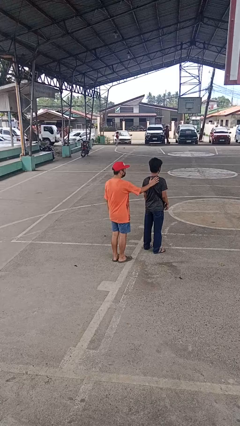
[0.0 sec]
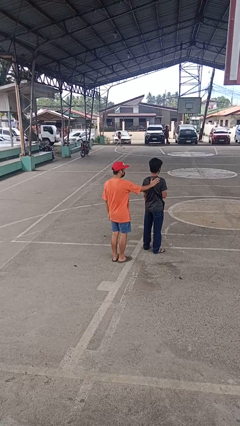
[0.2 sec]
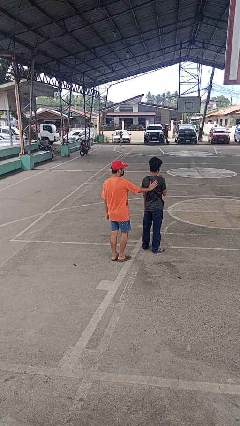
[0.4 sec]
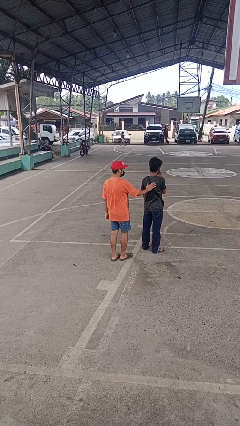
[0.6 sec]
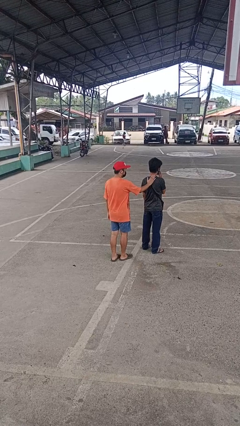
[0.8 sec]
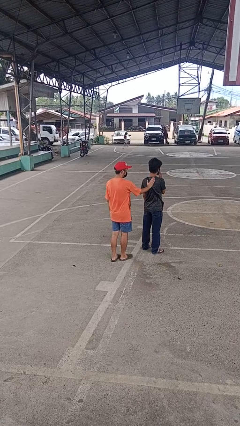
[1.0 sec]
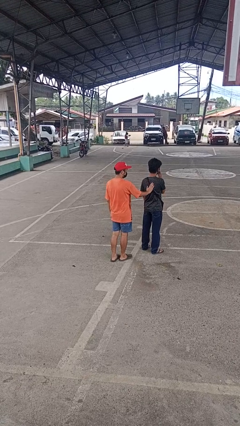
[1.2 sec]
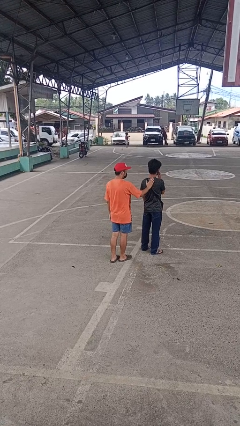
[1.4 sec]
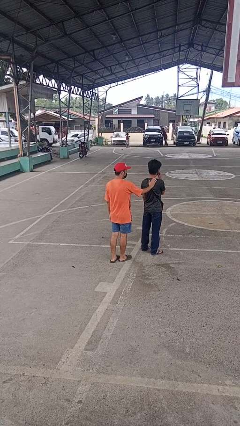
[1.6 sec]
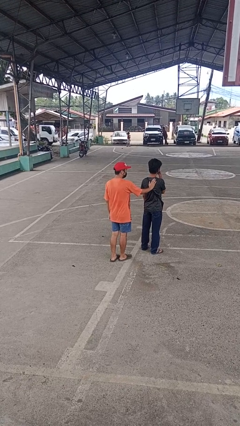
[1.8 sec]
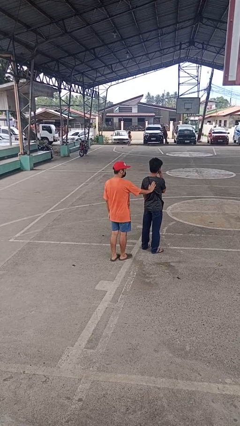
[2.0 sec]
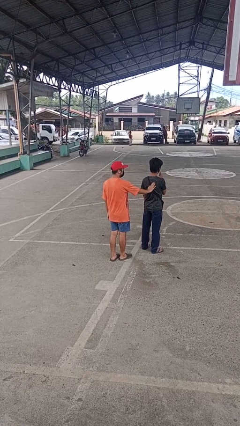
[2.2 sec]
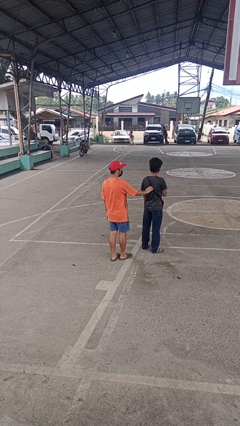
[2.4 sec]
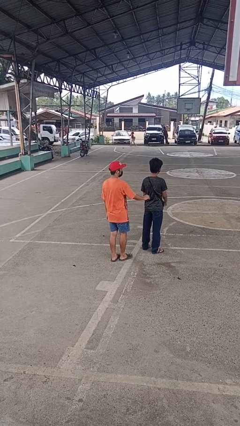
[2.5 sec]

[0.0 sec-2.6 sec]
person touches back of person

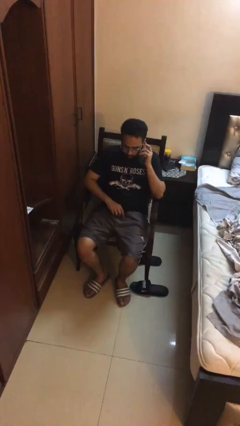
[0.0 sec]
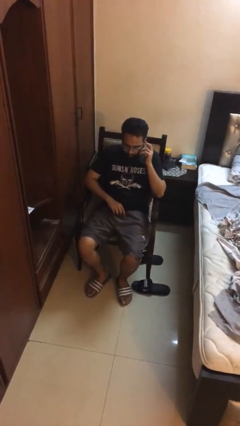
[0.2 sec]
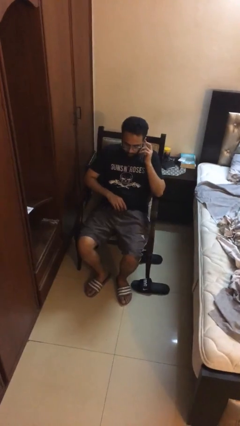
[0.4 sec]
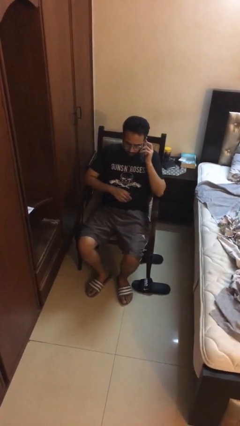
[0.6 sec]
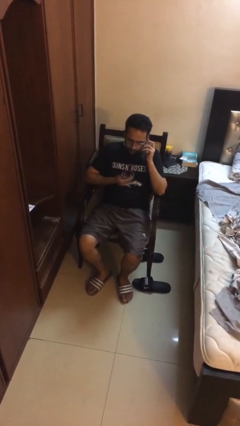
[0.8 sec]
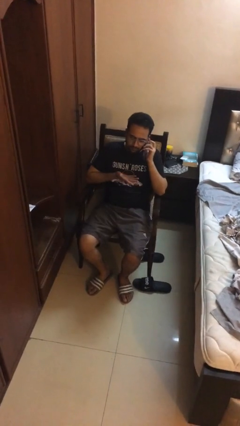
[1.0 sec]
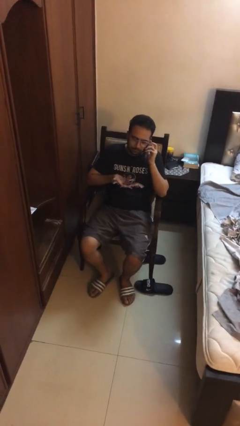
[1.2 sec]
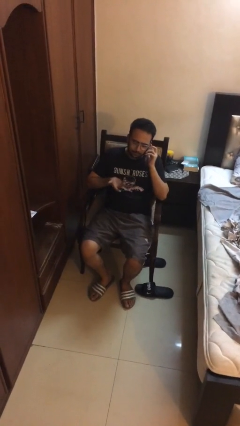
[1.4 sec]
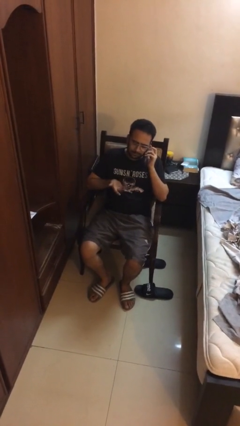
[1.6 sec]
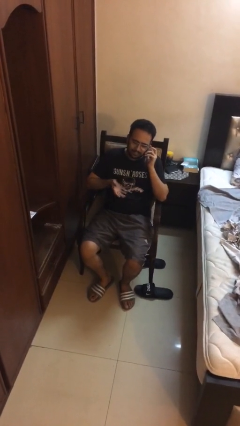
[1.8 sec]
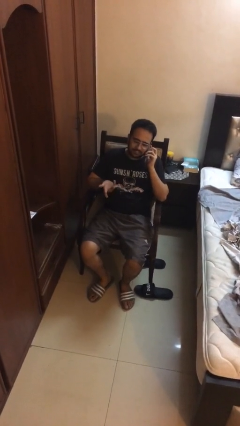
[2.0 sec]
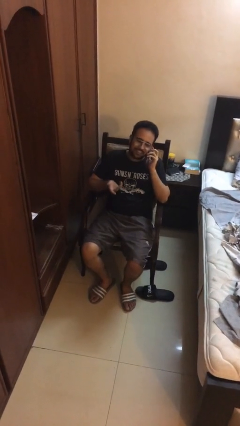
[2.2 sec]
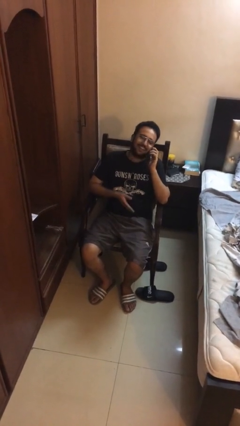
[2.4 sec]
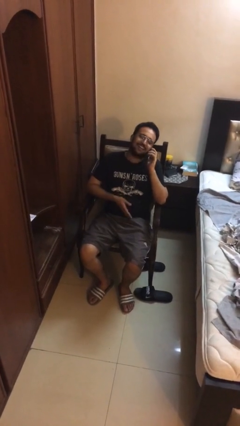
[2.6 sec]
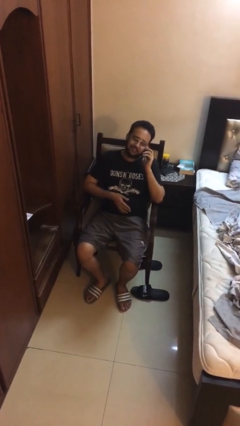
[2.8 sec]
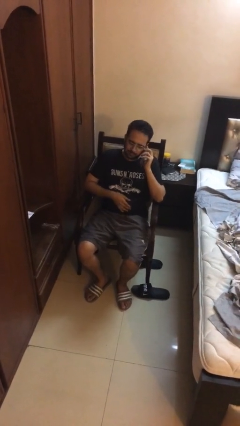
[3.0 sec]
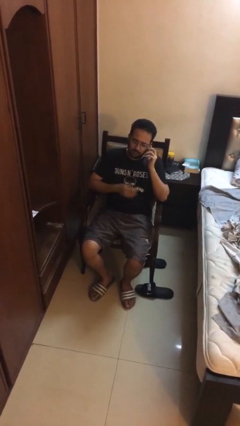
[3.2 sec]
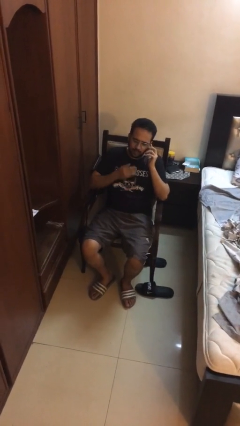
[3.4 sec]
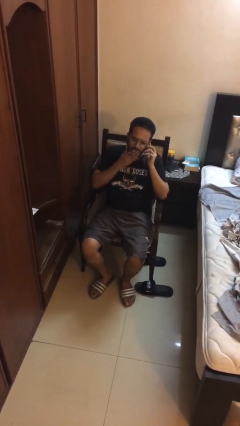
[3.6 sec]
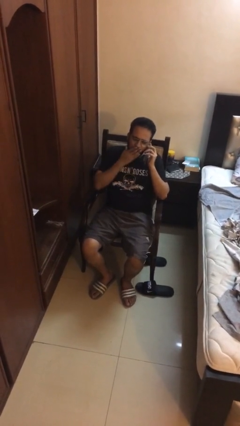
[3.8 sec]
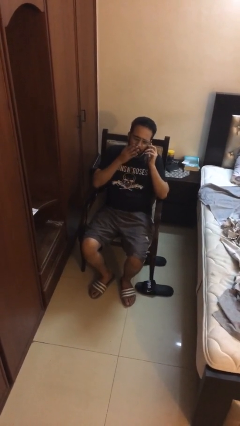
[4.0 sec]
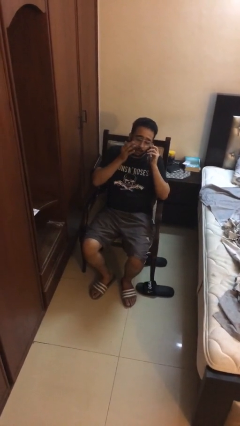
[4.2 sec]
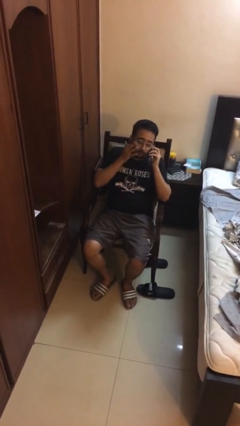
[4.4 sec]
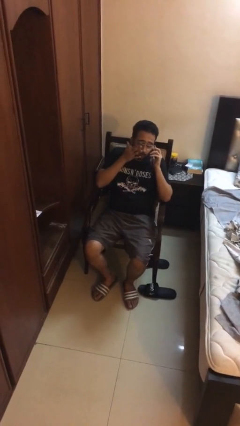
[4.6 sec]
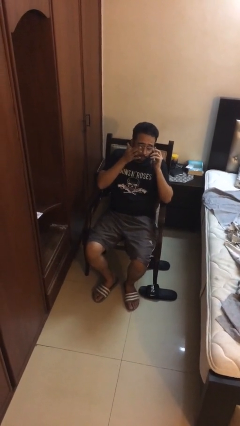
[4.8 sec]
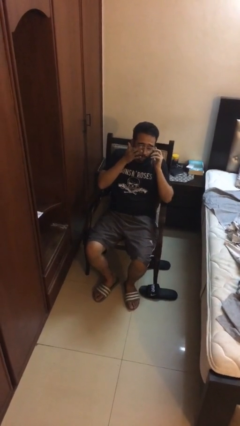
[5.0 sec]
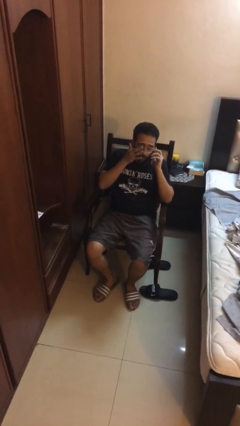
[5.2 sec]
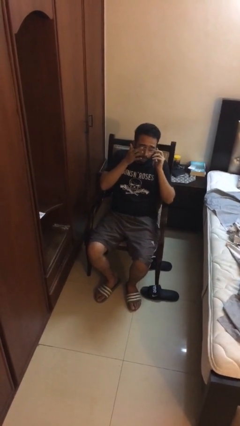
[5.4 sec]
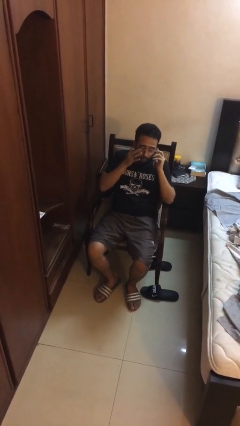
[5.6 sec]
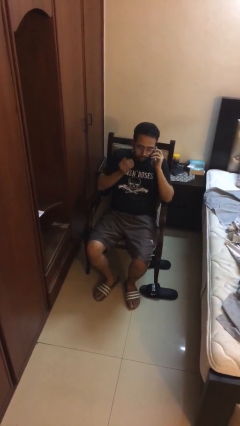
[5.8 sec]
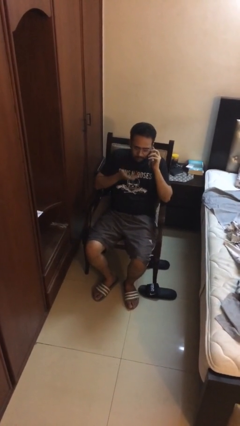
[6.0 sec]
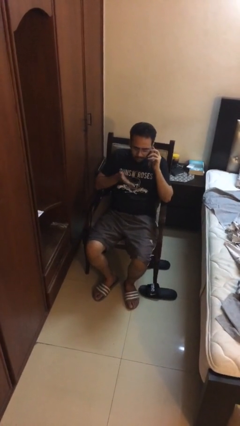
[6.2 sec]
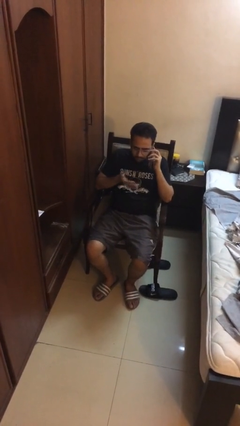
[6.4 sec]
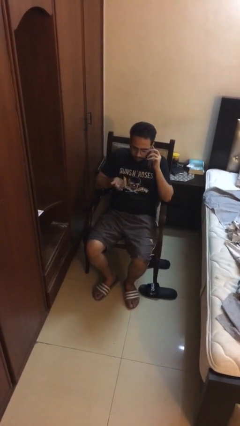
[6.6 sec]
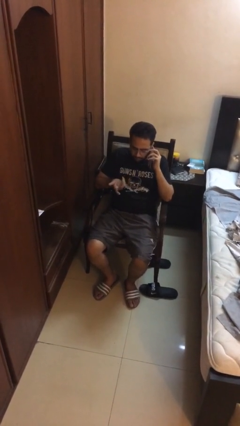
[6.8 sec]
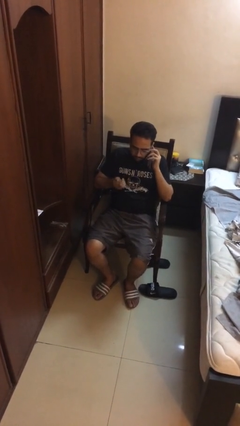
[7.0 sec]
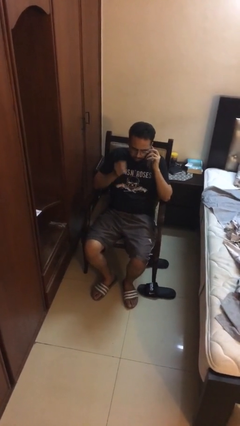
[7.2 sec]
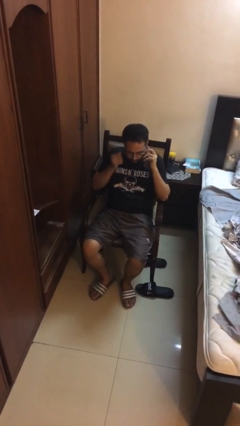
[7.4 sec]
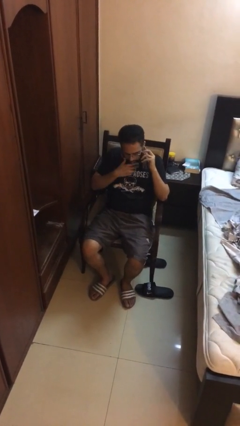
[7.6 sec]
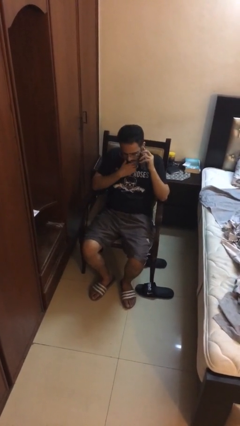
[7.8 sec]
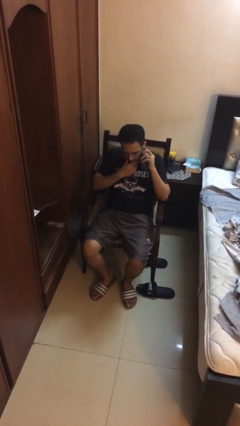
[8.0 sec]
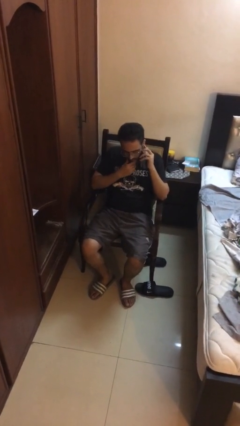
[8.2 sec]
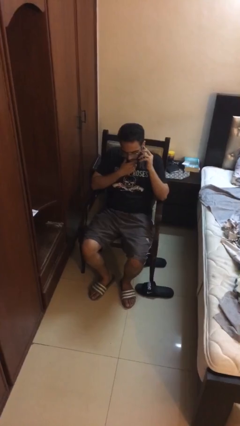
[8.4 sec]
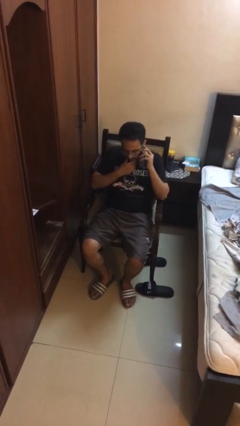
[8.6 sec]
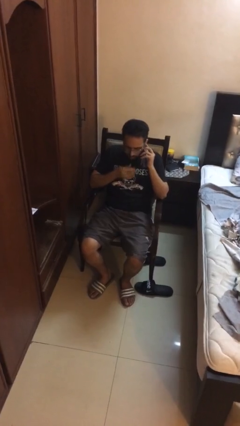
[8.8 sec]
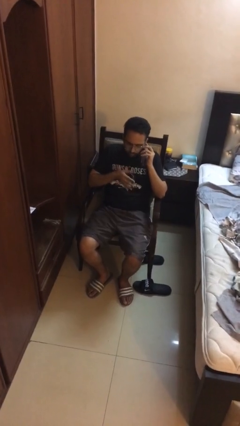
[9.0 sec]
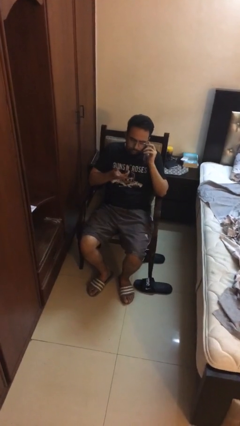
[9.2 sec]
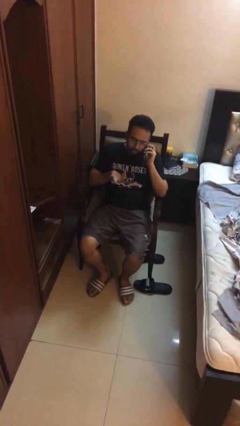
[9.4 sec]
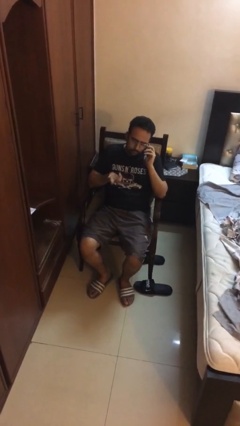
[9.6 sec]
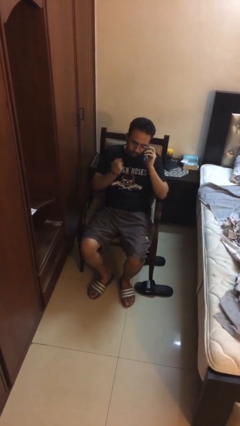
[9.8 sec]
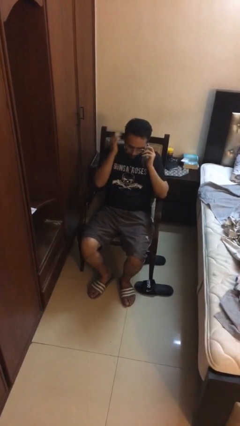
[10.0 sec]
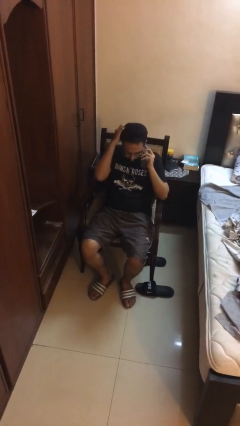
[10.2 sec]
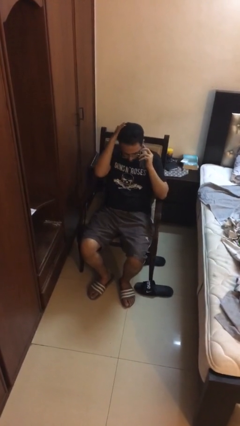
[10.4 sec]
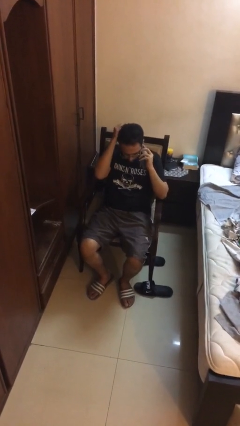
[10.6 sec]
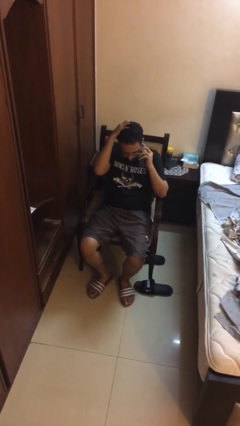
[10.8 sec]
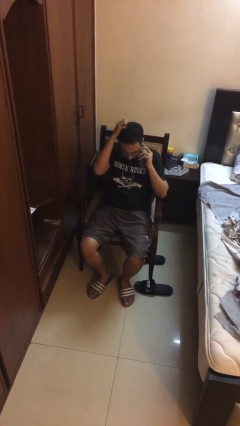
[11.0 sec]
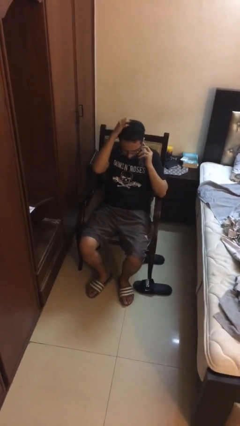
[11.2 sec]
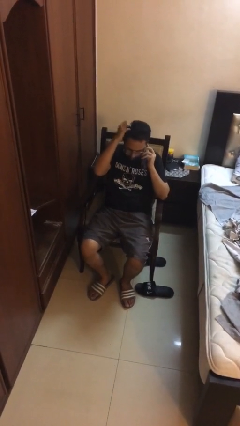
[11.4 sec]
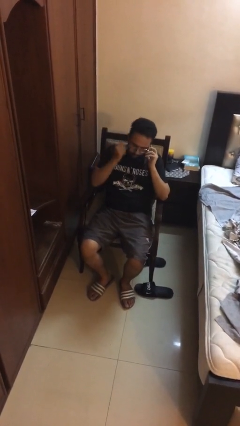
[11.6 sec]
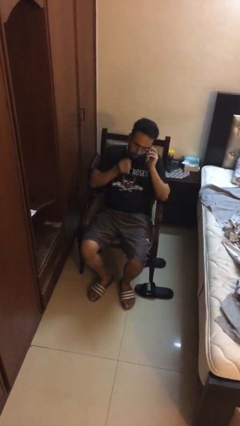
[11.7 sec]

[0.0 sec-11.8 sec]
person talks on phone

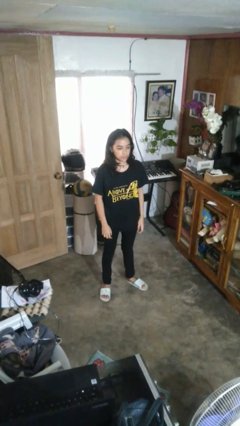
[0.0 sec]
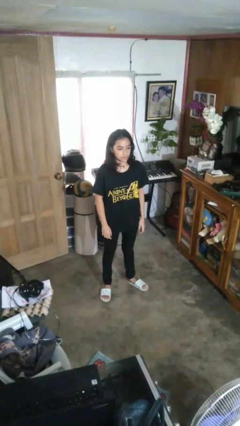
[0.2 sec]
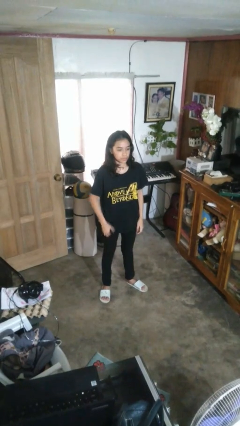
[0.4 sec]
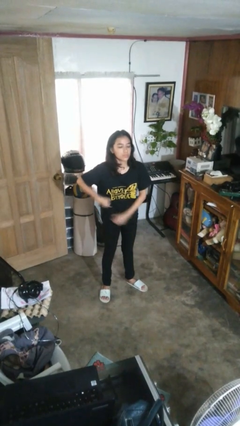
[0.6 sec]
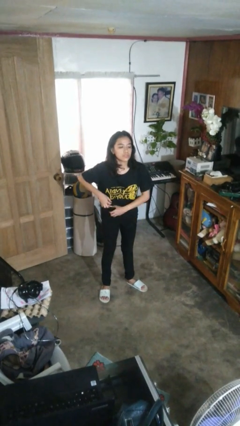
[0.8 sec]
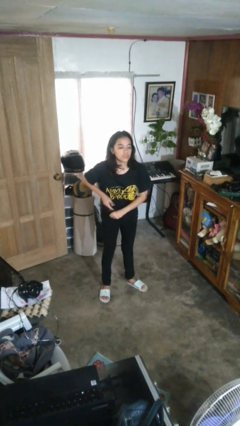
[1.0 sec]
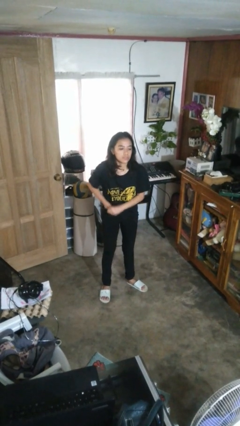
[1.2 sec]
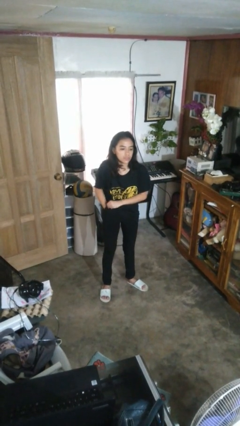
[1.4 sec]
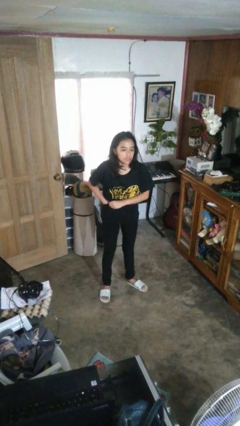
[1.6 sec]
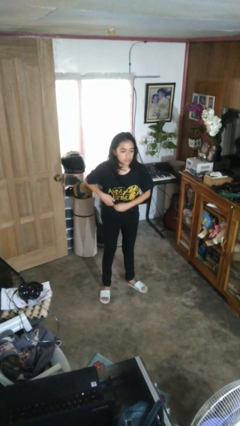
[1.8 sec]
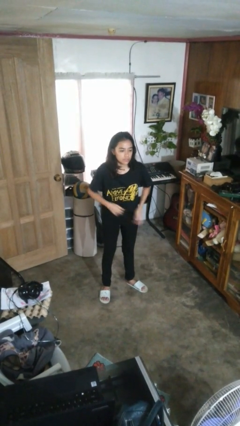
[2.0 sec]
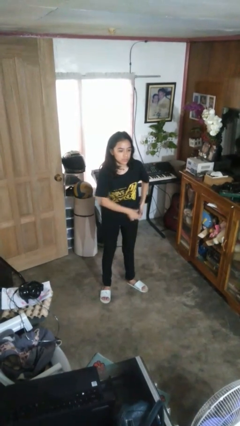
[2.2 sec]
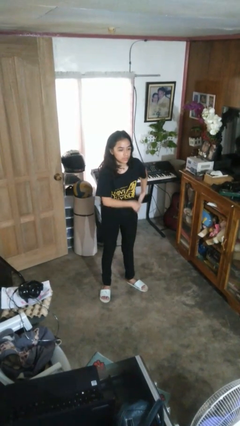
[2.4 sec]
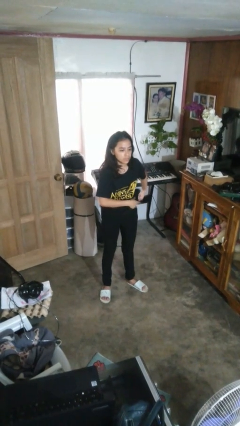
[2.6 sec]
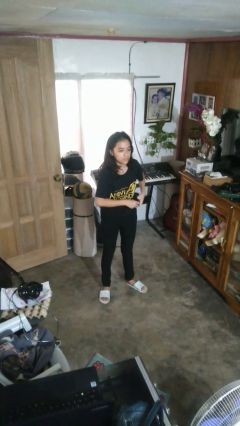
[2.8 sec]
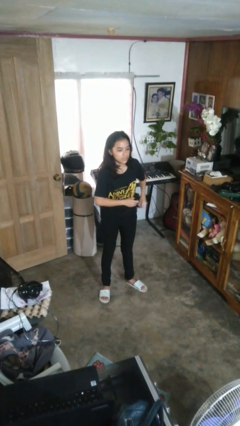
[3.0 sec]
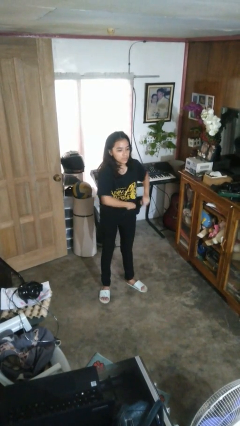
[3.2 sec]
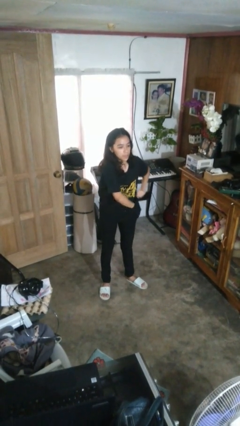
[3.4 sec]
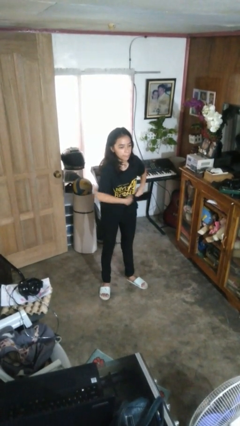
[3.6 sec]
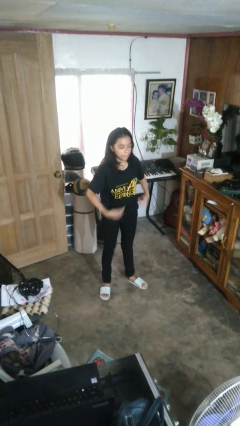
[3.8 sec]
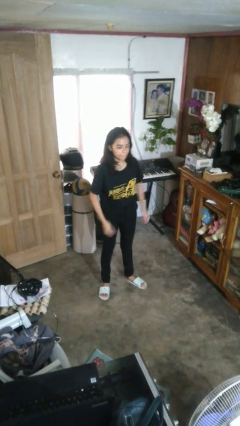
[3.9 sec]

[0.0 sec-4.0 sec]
person tucks in shirt
